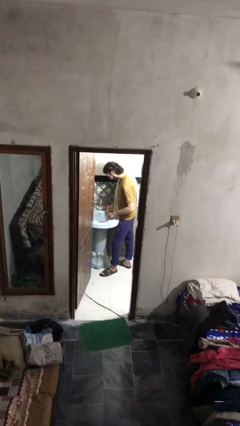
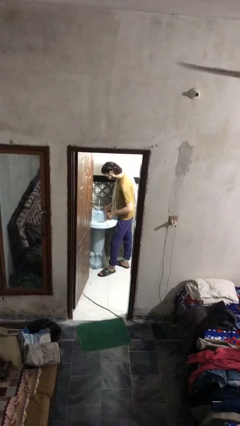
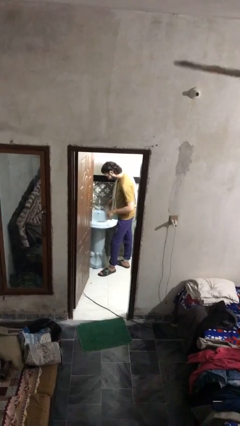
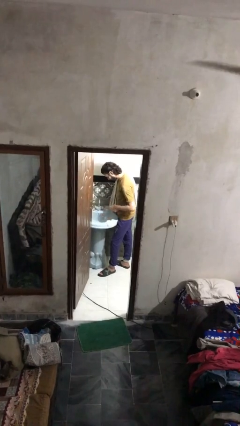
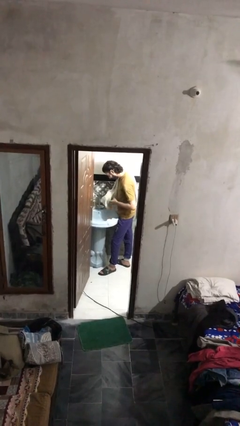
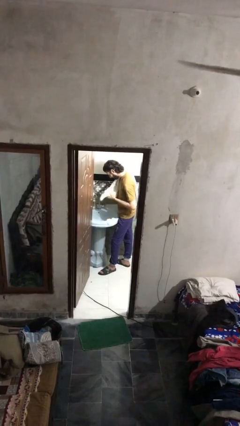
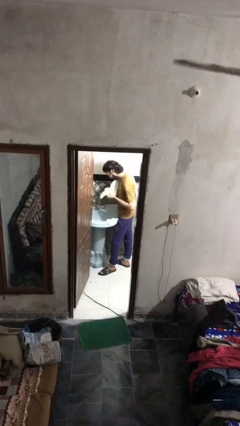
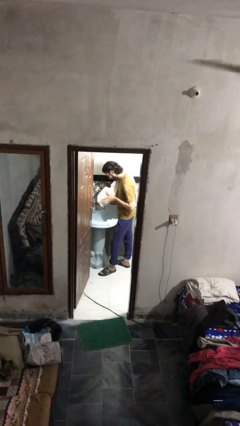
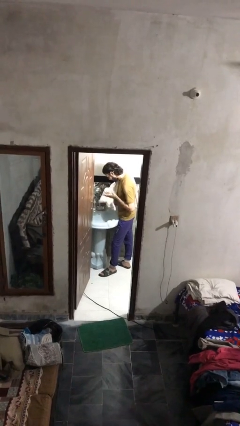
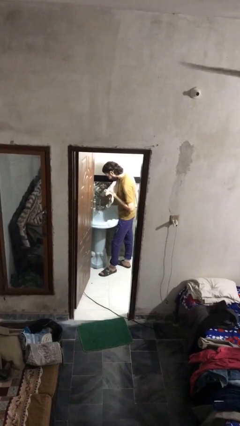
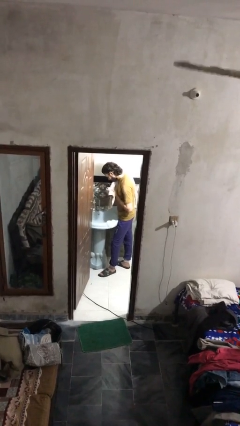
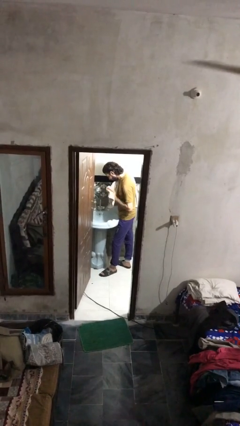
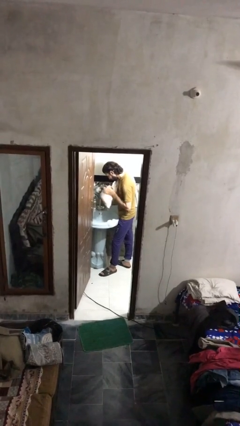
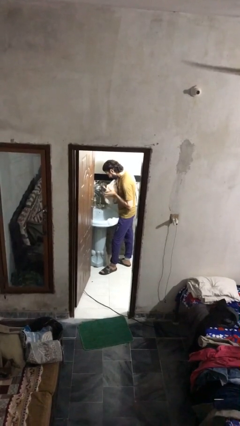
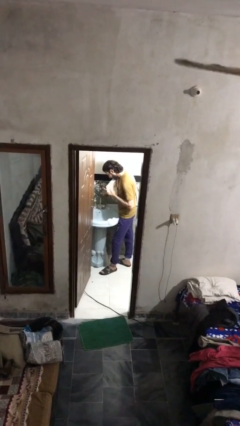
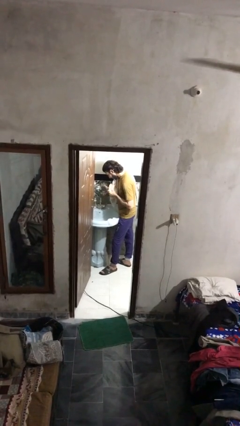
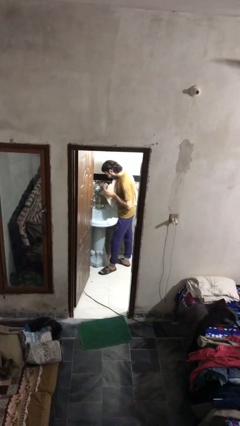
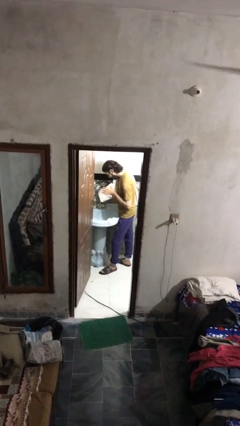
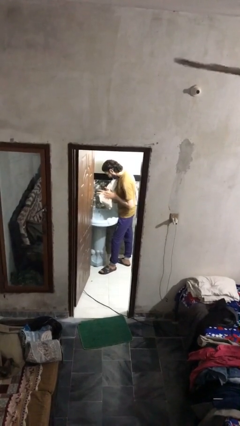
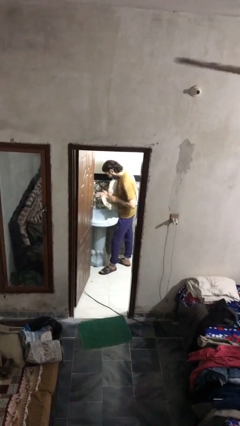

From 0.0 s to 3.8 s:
person dries hands with towel

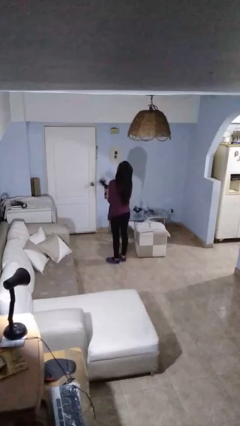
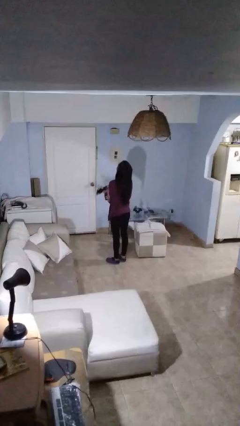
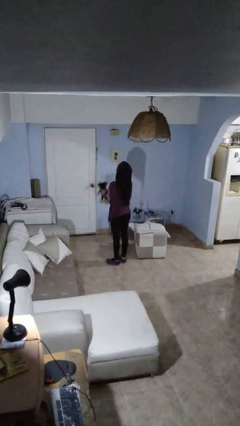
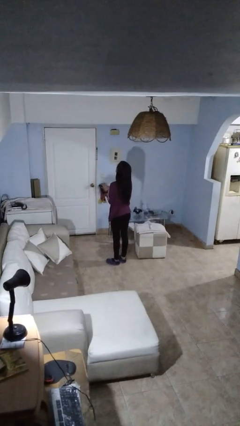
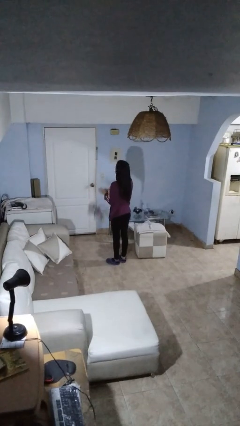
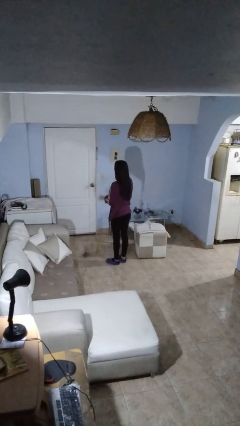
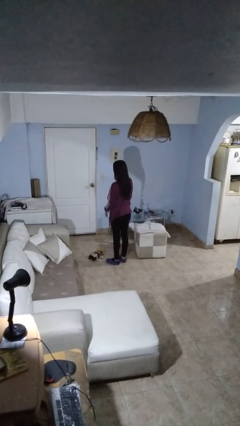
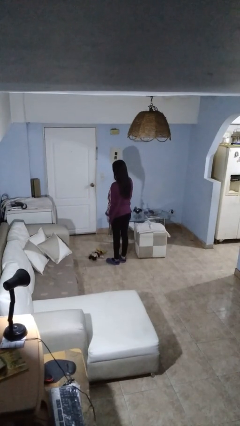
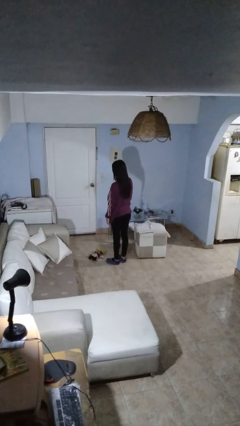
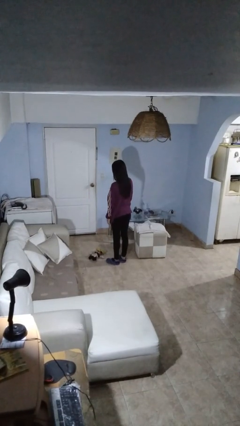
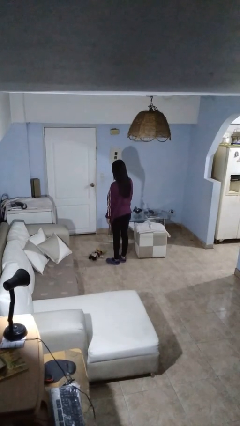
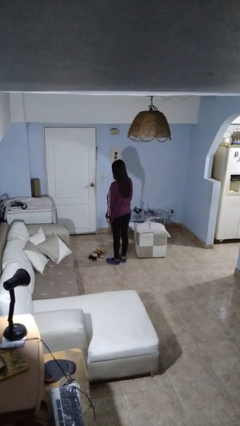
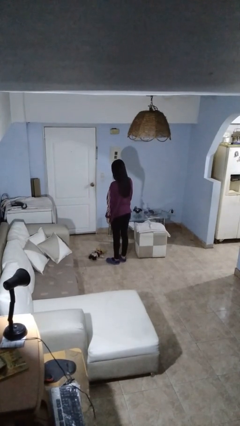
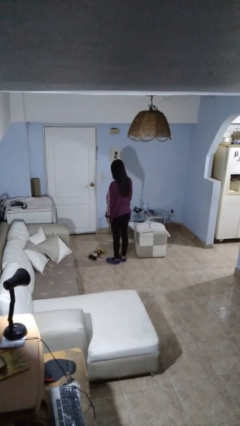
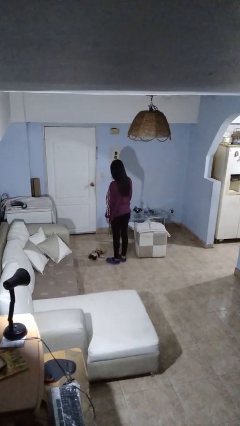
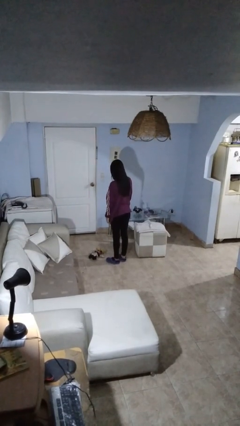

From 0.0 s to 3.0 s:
person drops object

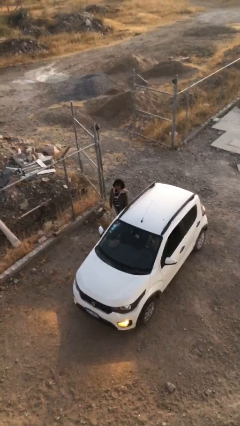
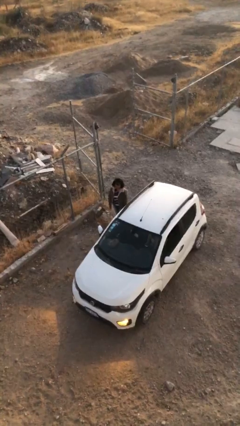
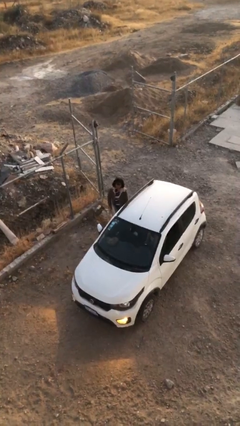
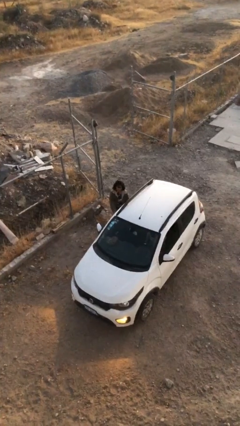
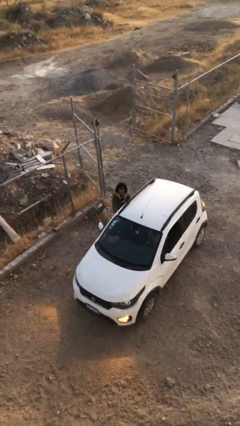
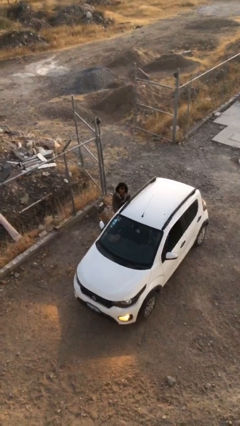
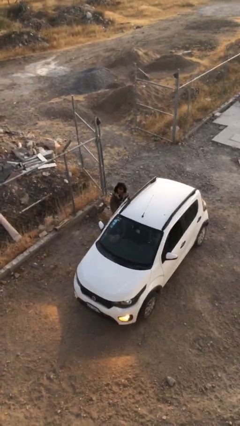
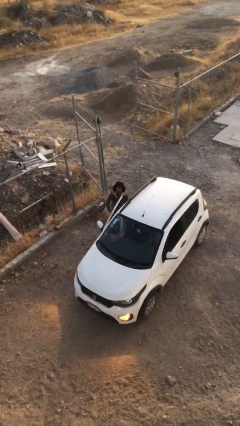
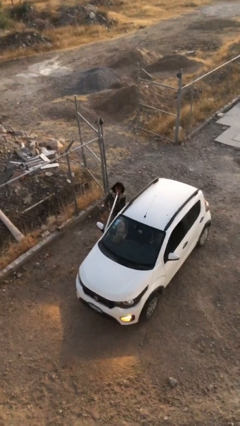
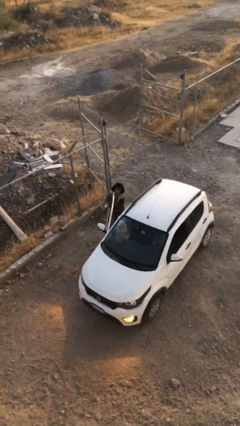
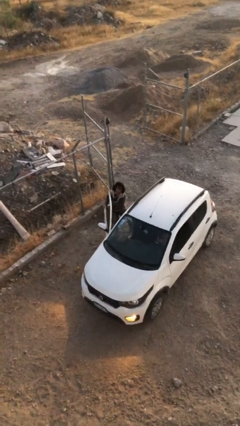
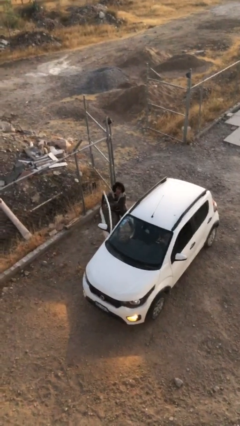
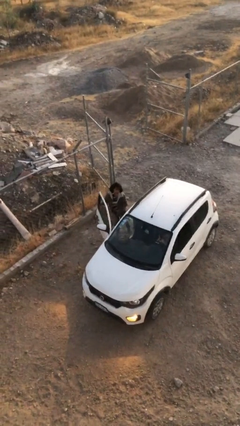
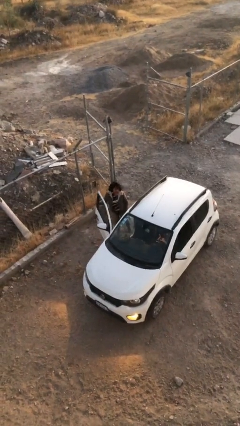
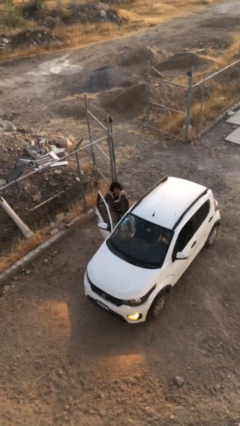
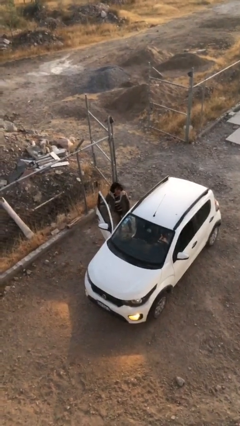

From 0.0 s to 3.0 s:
person opens car door

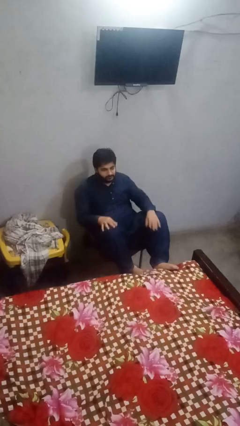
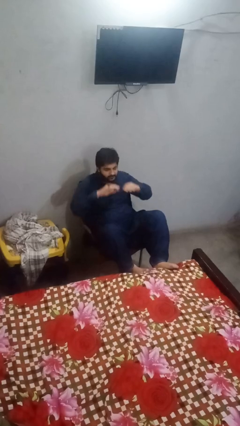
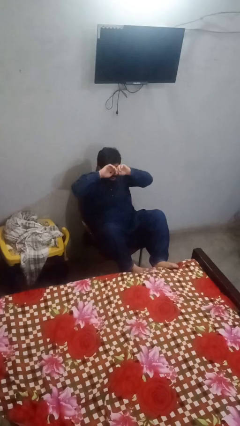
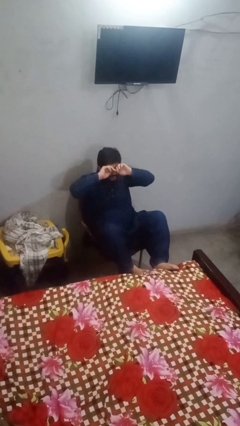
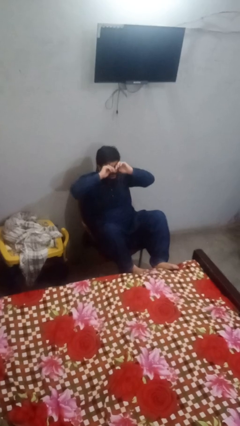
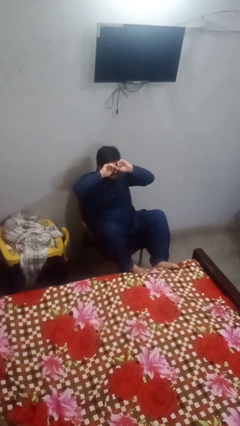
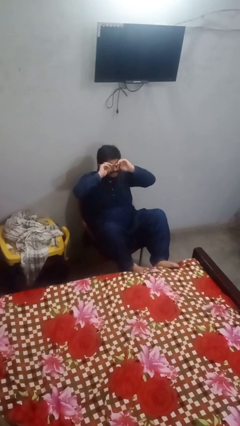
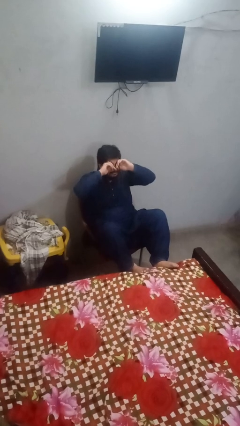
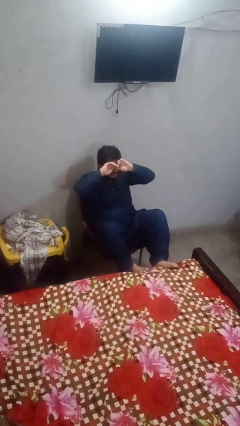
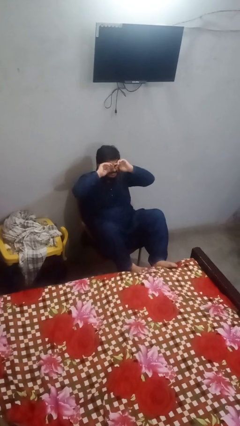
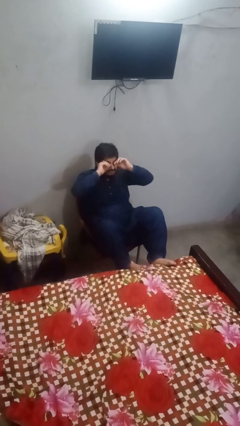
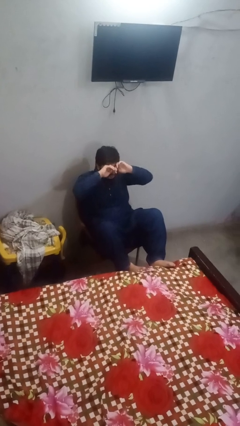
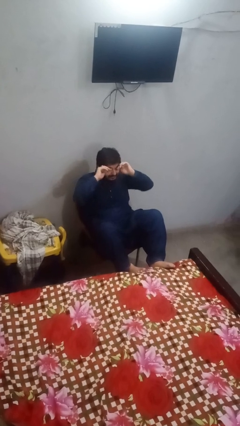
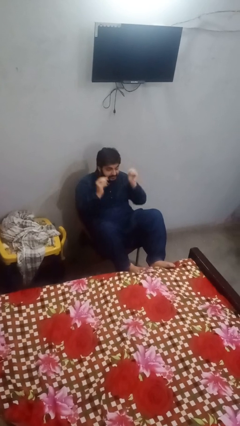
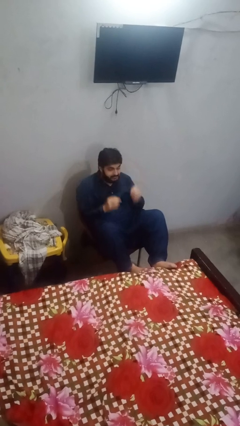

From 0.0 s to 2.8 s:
person rubs eyes

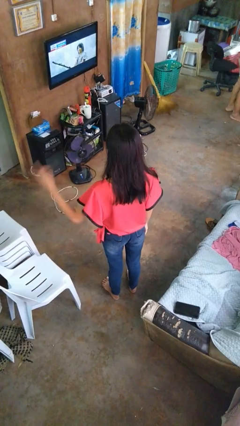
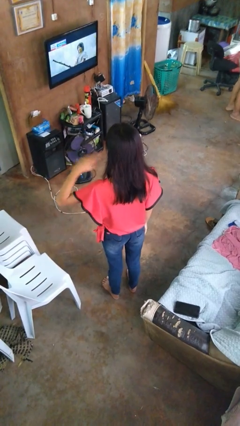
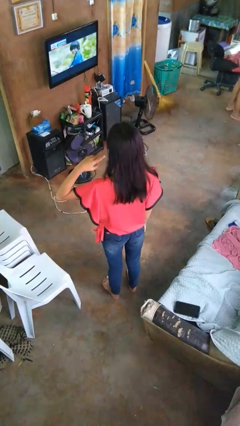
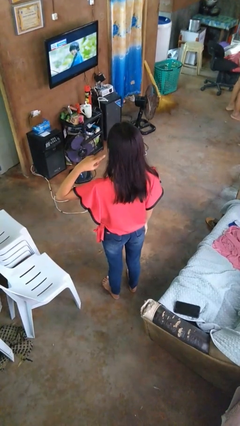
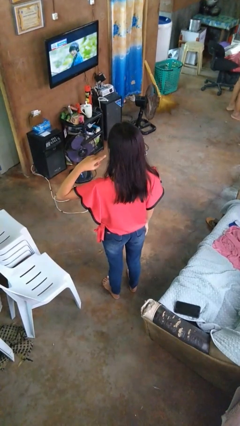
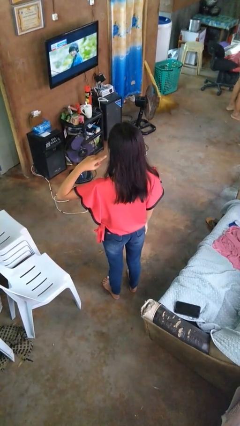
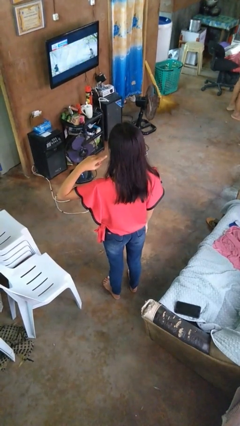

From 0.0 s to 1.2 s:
person gestures listen closely

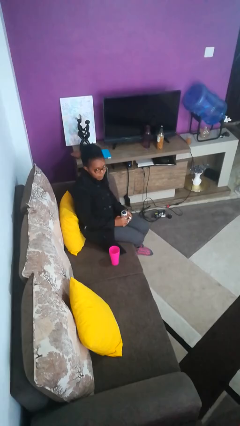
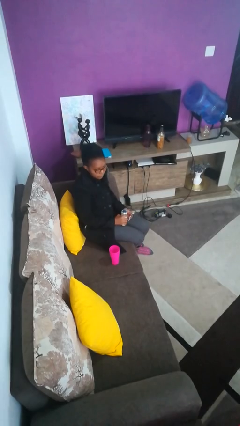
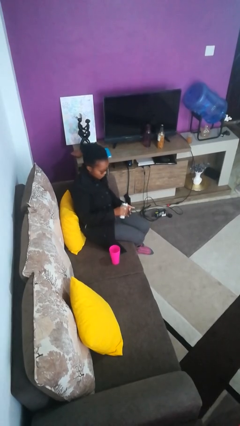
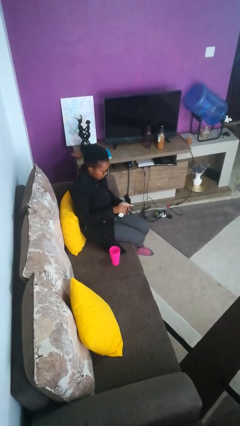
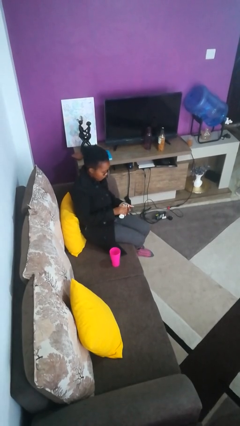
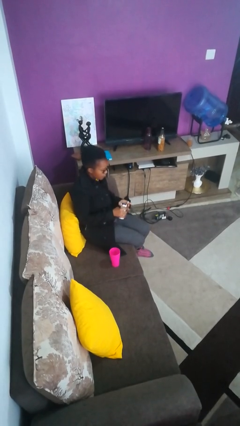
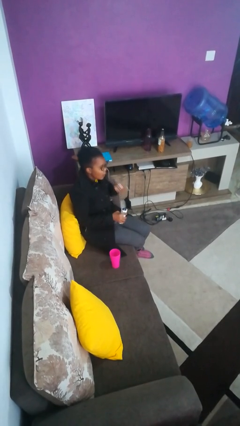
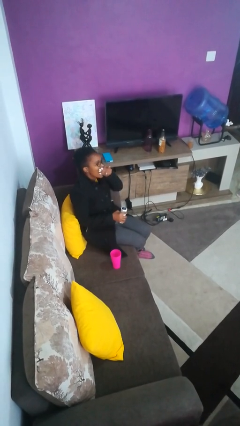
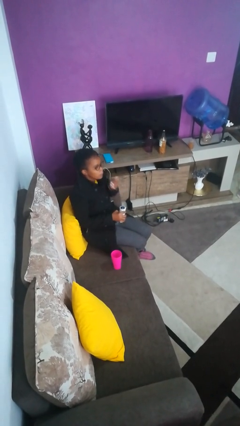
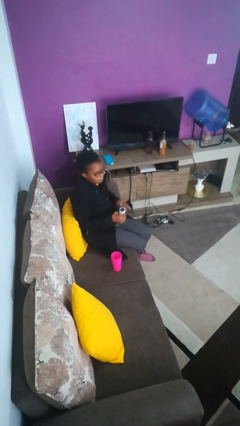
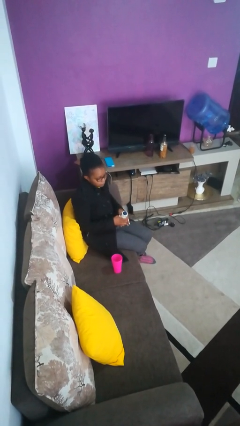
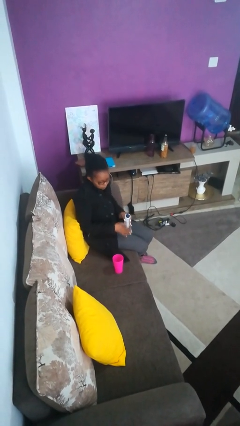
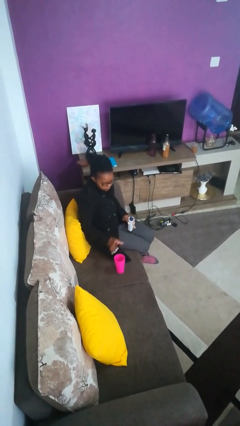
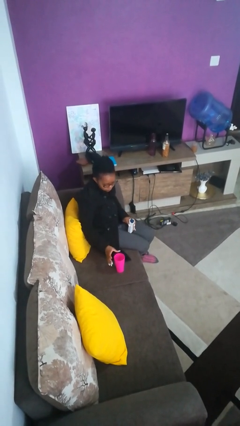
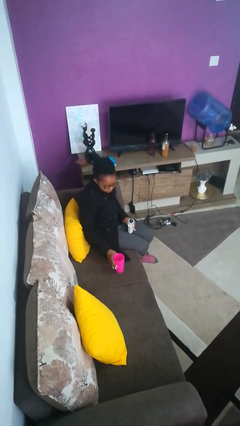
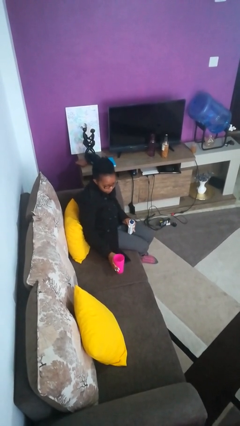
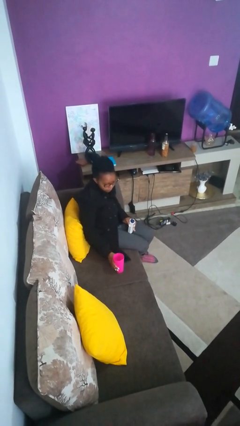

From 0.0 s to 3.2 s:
person takes medicine pills

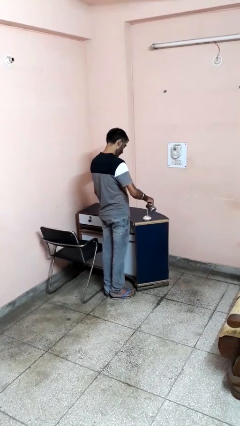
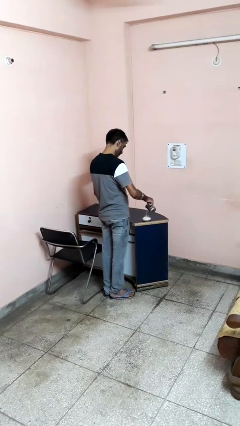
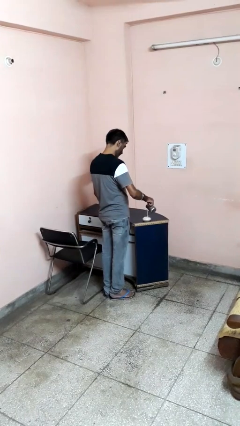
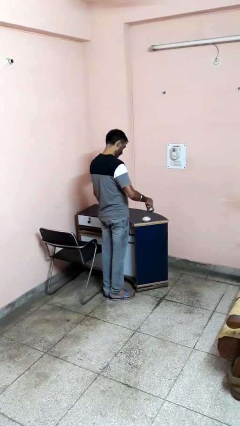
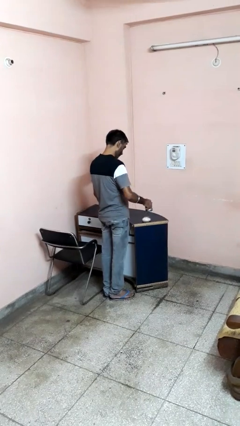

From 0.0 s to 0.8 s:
person pours into bowl
